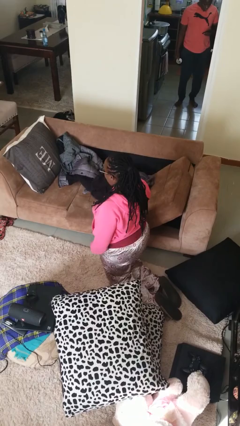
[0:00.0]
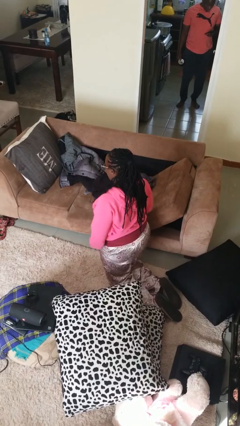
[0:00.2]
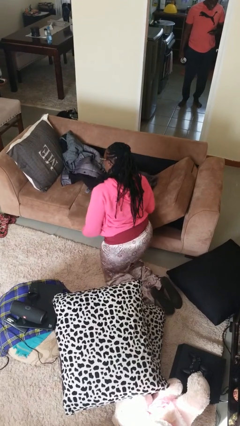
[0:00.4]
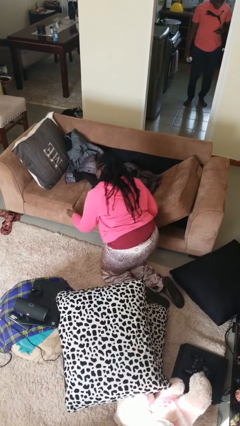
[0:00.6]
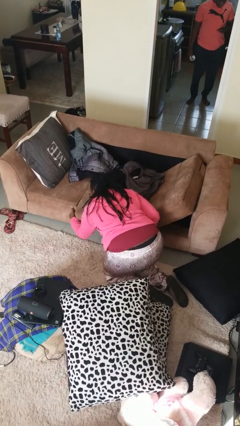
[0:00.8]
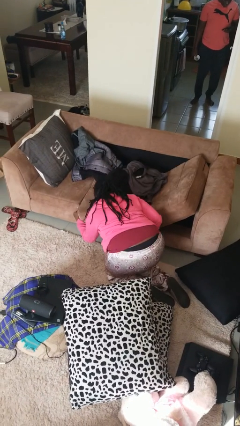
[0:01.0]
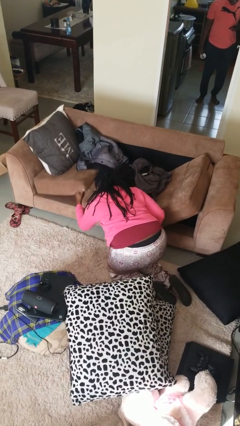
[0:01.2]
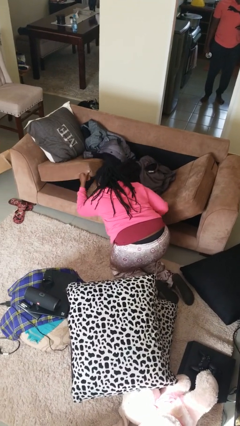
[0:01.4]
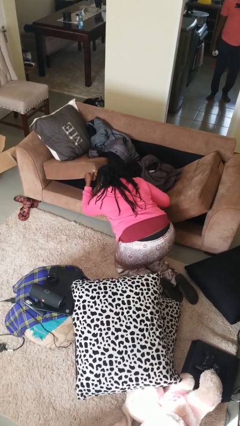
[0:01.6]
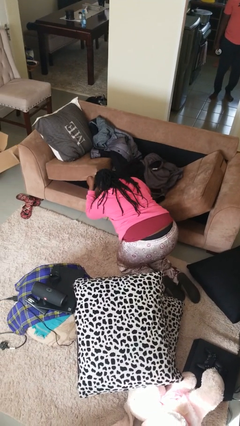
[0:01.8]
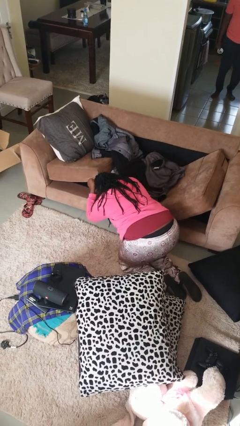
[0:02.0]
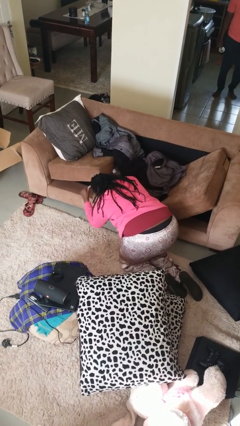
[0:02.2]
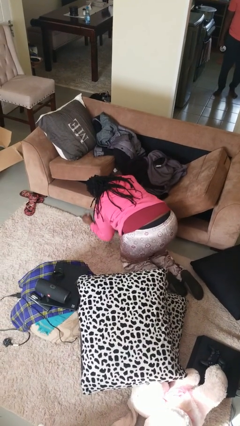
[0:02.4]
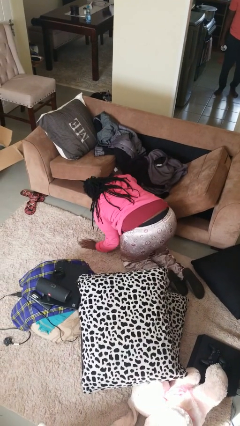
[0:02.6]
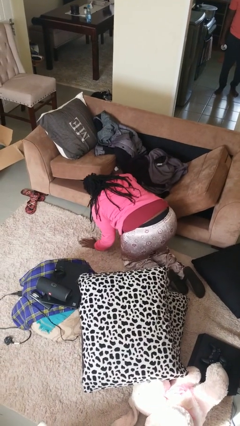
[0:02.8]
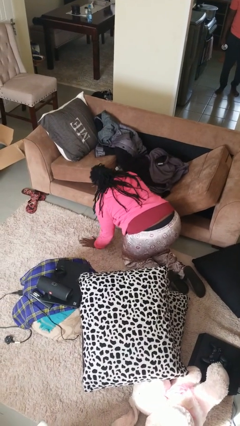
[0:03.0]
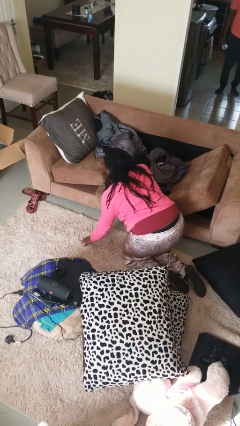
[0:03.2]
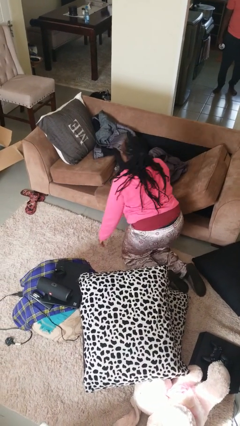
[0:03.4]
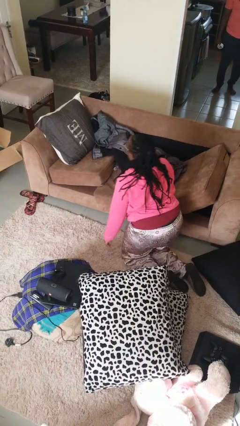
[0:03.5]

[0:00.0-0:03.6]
person searches under couch

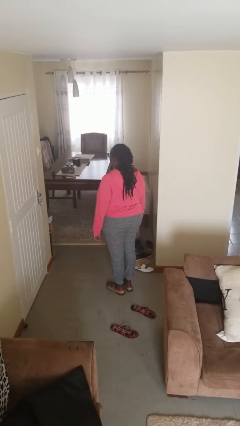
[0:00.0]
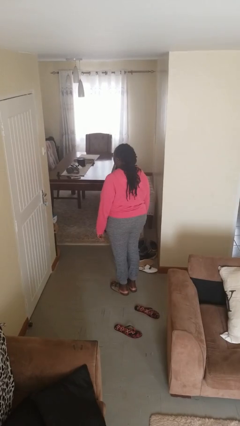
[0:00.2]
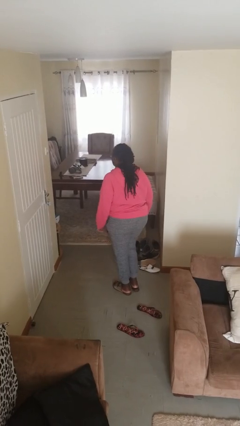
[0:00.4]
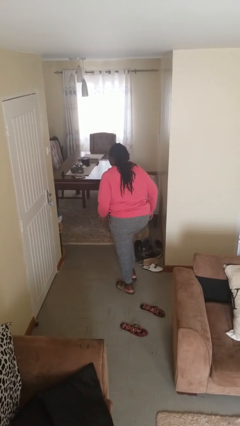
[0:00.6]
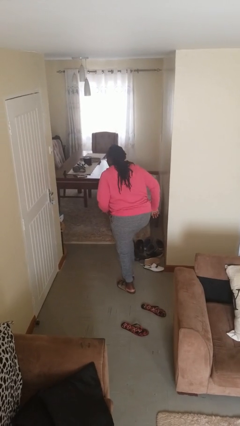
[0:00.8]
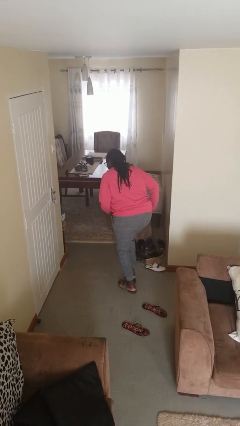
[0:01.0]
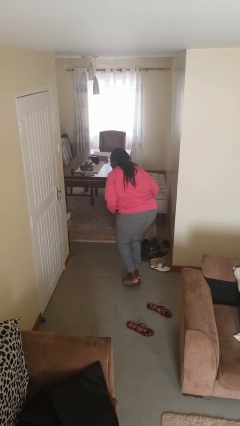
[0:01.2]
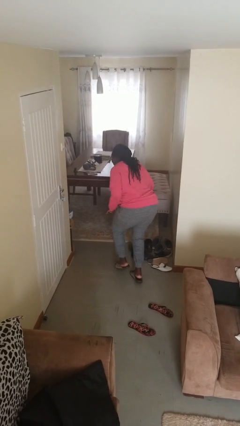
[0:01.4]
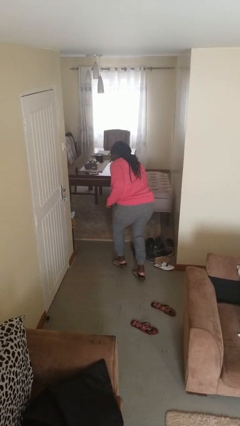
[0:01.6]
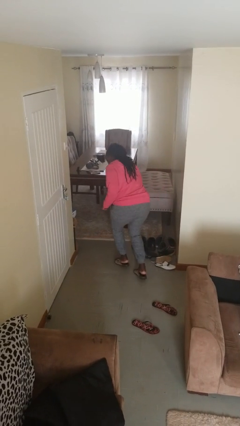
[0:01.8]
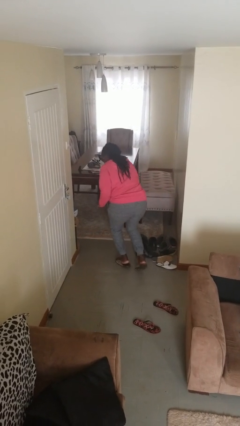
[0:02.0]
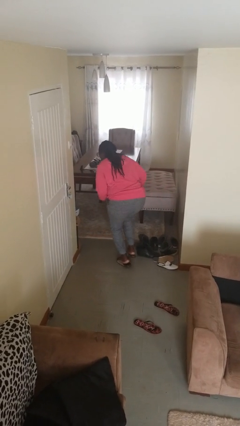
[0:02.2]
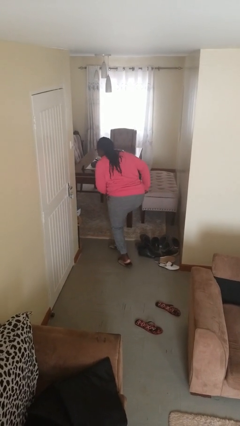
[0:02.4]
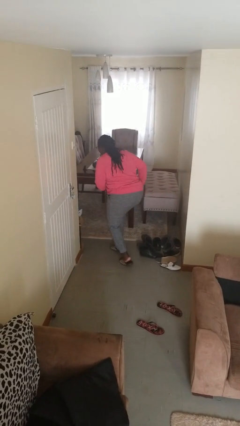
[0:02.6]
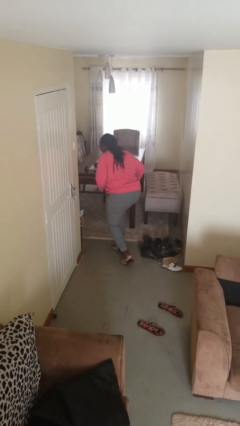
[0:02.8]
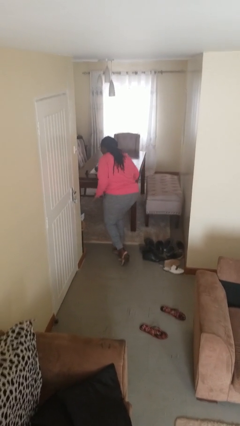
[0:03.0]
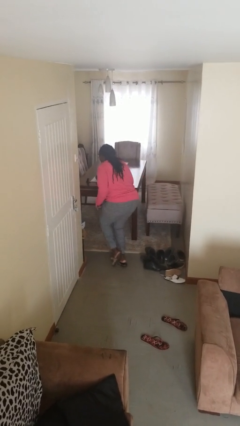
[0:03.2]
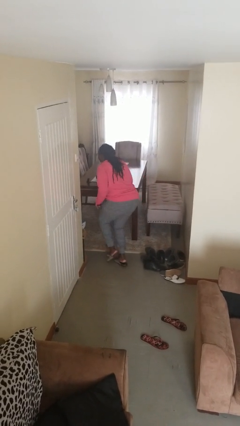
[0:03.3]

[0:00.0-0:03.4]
person walks tiptoe

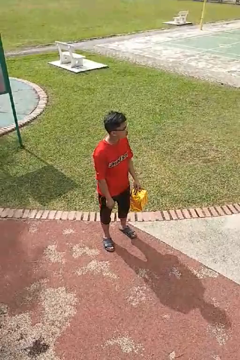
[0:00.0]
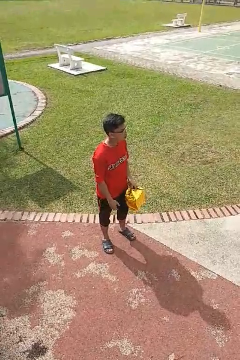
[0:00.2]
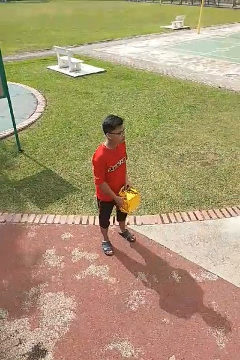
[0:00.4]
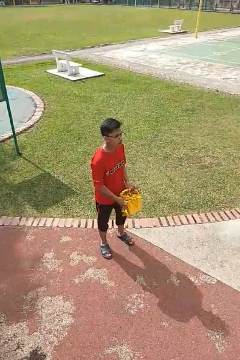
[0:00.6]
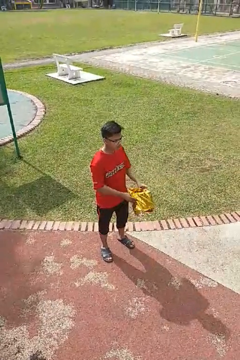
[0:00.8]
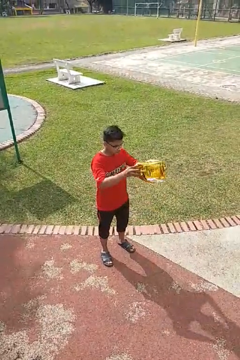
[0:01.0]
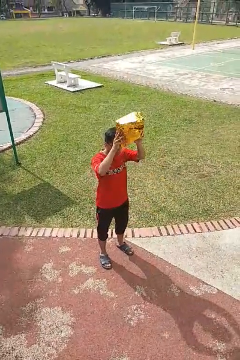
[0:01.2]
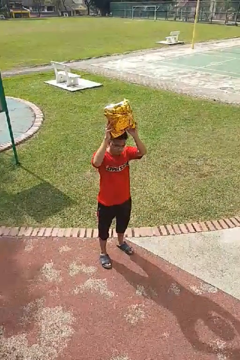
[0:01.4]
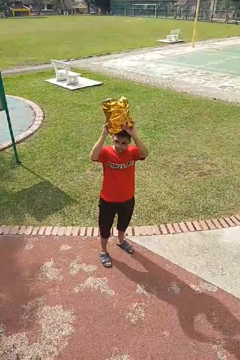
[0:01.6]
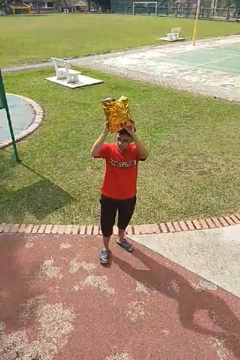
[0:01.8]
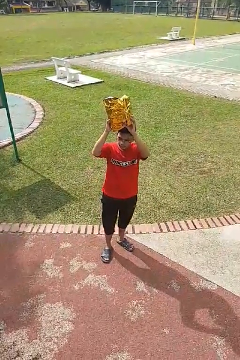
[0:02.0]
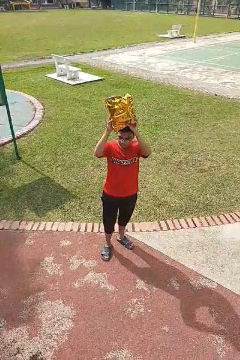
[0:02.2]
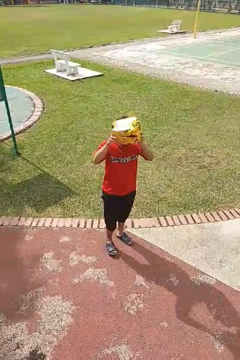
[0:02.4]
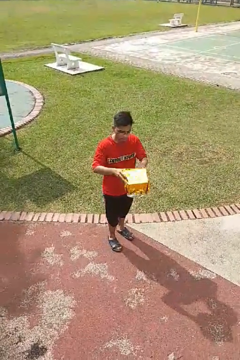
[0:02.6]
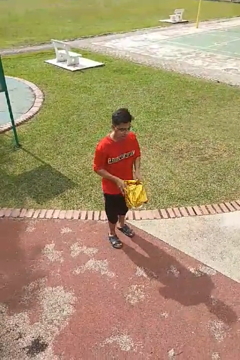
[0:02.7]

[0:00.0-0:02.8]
person holds object above head

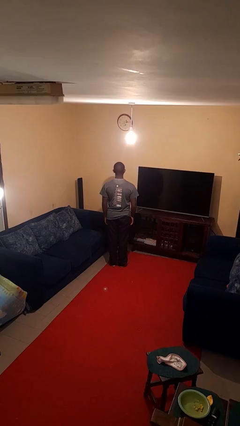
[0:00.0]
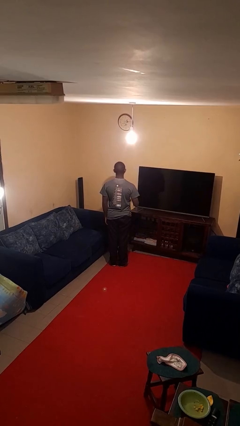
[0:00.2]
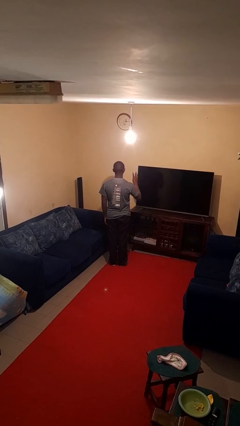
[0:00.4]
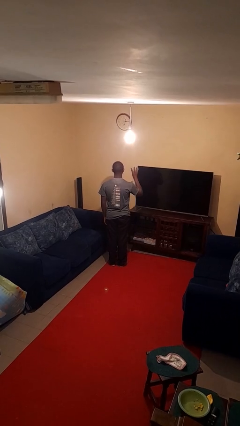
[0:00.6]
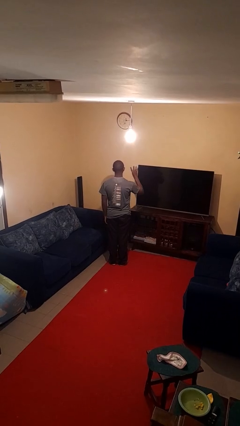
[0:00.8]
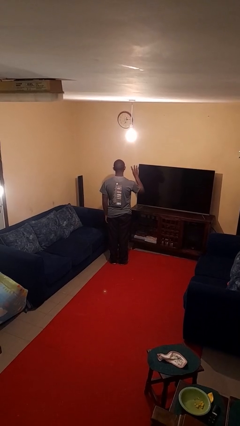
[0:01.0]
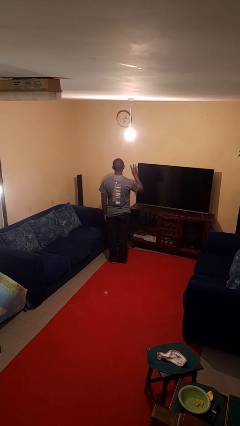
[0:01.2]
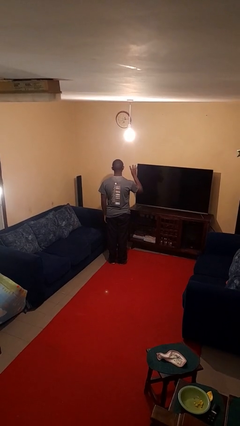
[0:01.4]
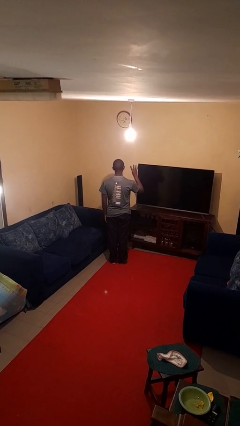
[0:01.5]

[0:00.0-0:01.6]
person gestures number four

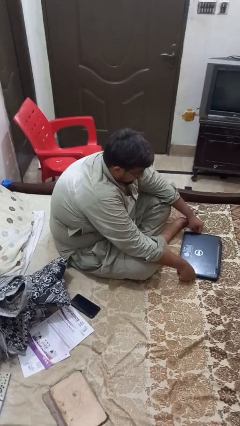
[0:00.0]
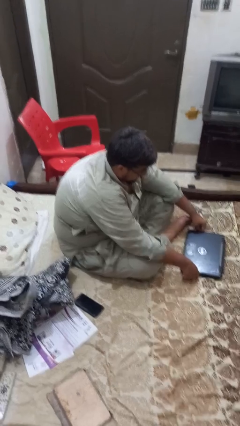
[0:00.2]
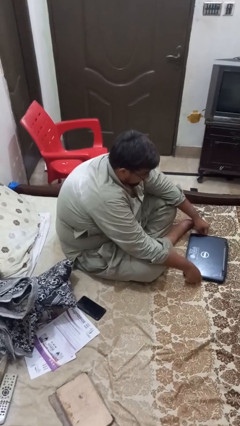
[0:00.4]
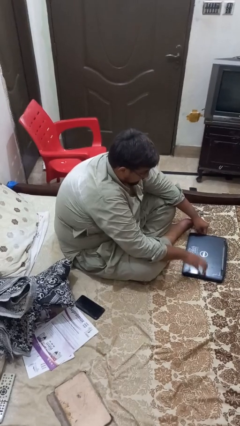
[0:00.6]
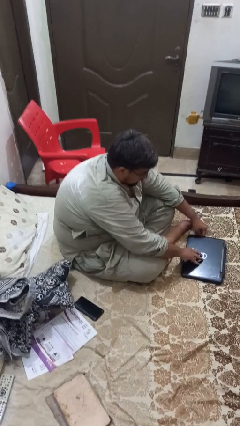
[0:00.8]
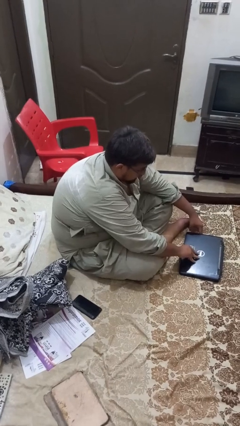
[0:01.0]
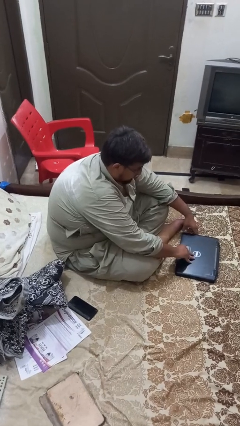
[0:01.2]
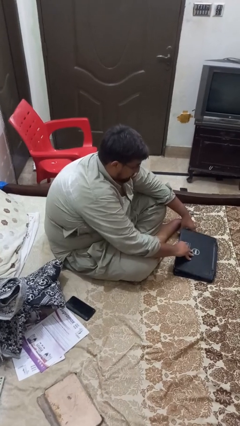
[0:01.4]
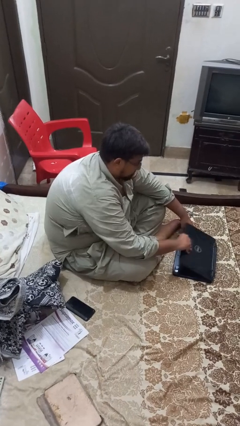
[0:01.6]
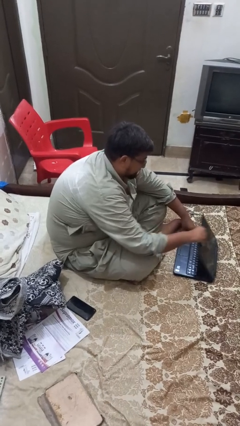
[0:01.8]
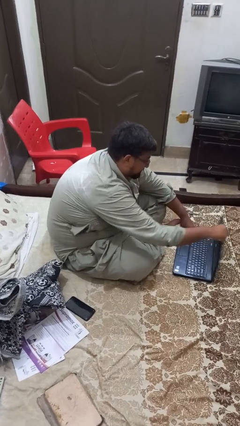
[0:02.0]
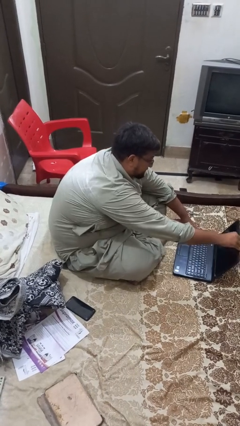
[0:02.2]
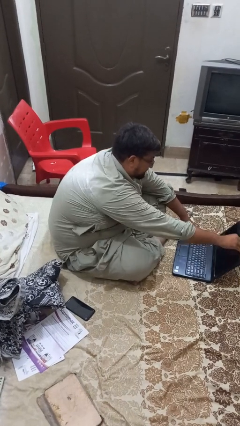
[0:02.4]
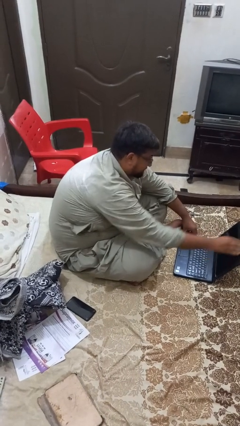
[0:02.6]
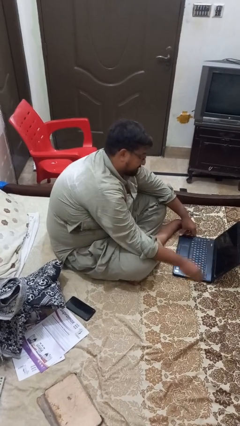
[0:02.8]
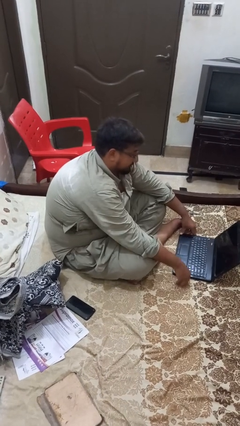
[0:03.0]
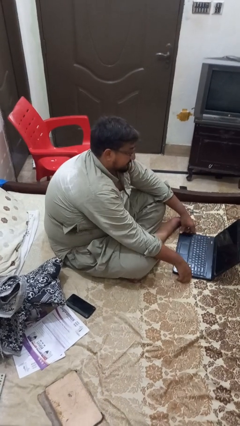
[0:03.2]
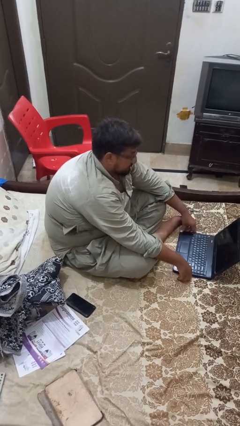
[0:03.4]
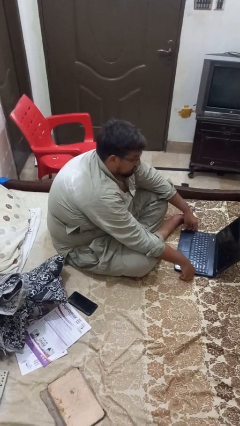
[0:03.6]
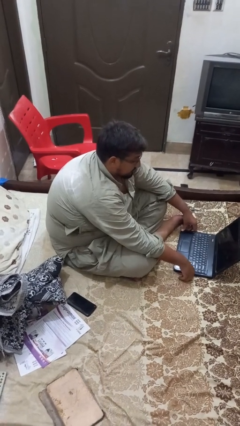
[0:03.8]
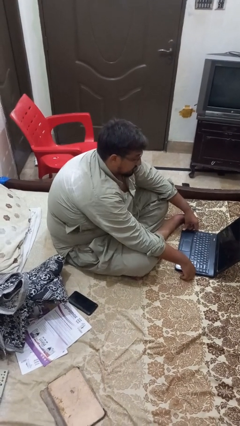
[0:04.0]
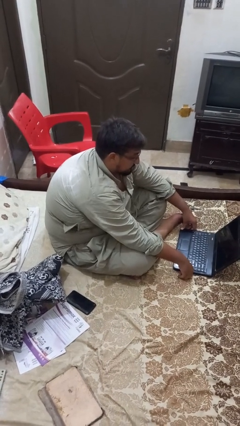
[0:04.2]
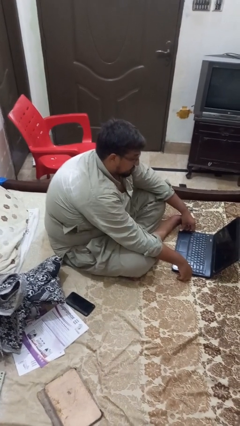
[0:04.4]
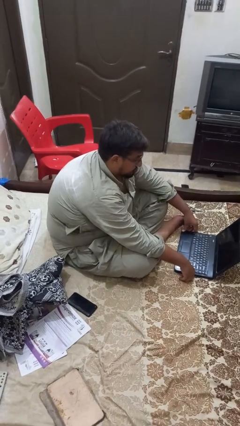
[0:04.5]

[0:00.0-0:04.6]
person opens laptop

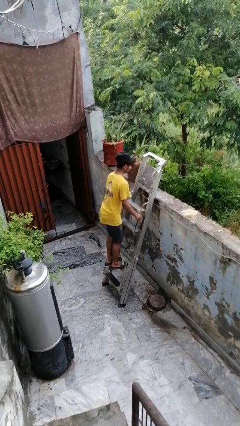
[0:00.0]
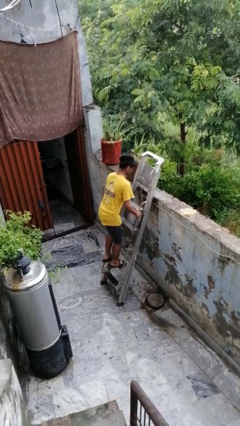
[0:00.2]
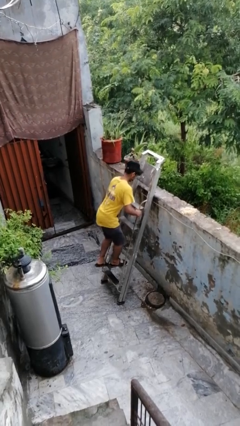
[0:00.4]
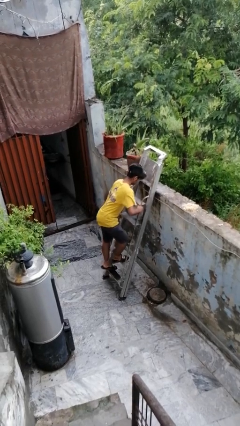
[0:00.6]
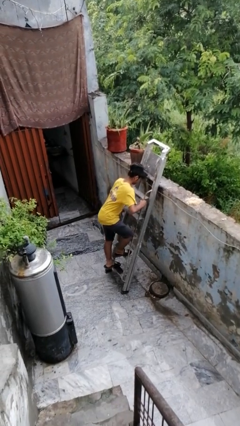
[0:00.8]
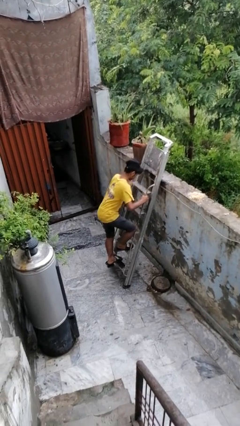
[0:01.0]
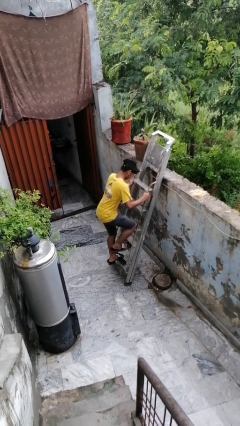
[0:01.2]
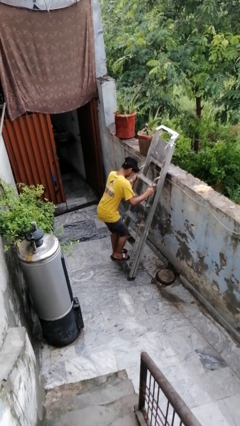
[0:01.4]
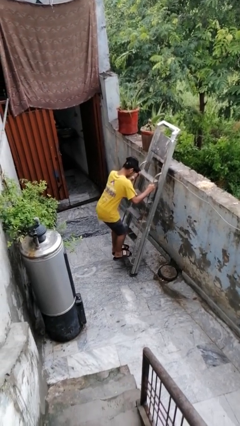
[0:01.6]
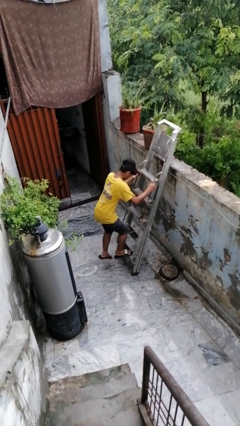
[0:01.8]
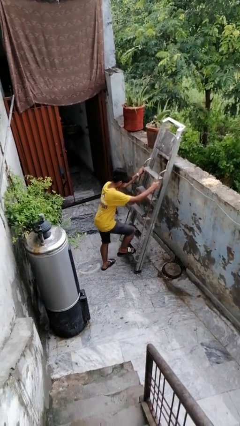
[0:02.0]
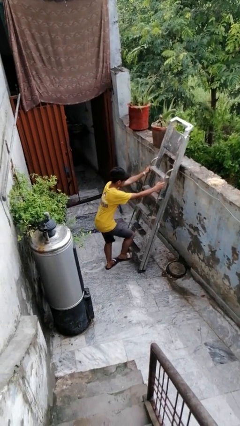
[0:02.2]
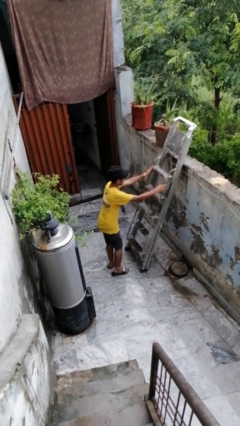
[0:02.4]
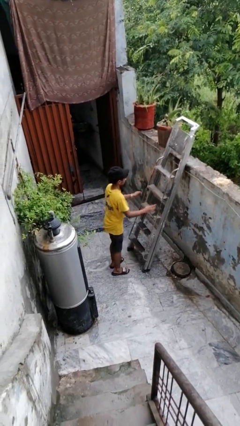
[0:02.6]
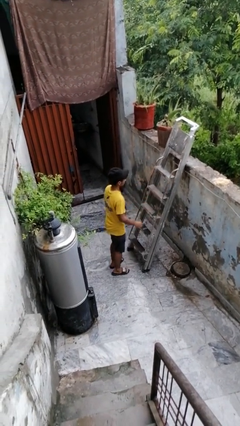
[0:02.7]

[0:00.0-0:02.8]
person climbs down ladder
